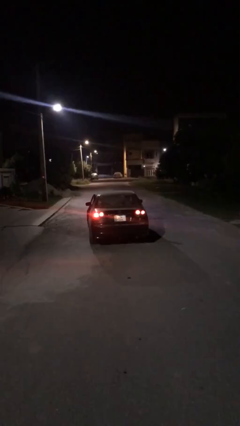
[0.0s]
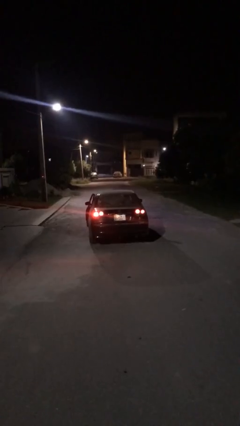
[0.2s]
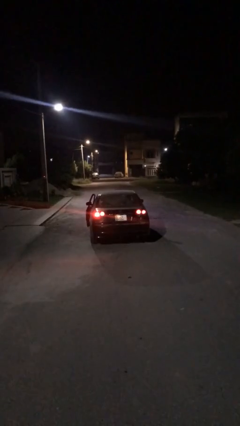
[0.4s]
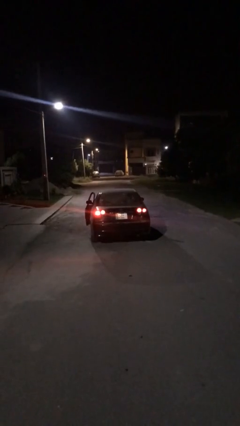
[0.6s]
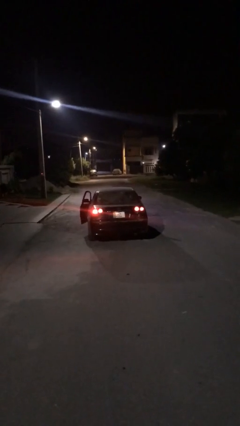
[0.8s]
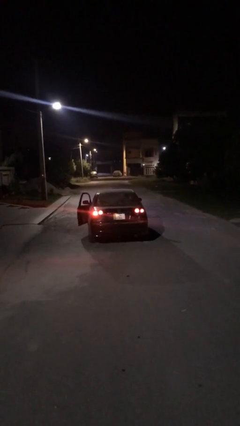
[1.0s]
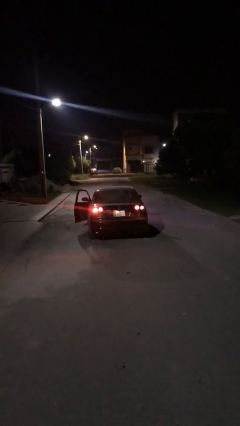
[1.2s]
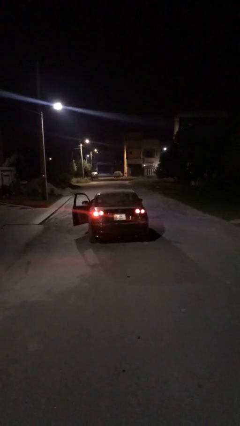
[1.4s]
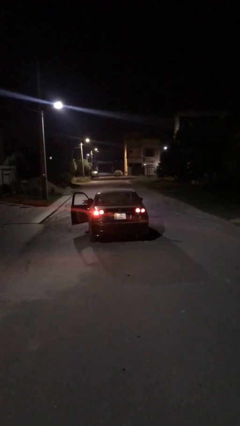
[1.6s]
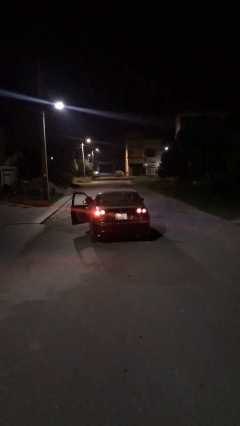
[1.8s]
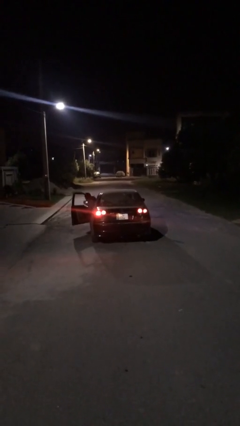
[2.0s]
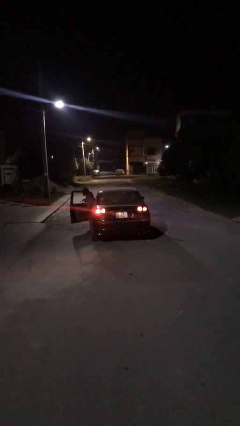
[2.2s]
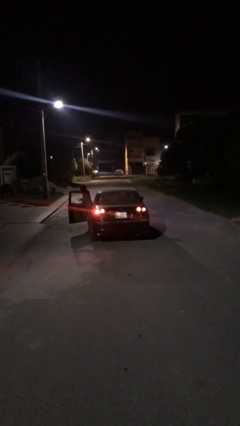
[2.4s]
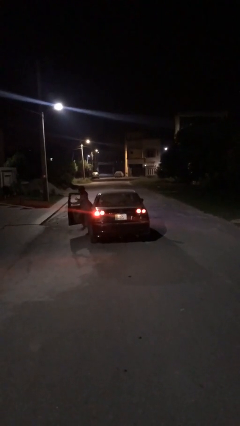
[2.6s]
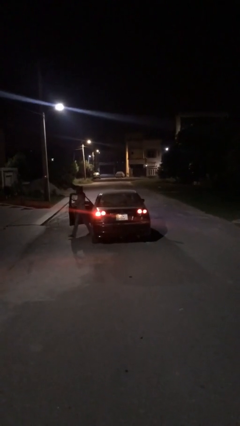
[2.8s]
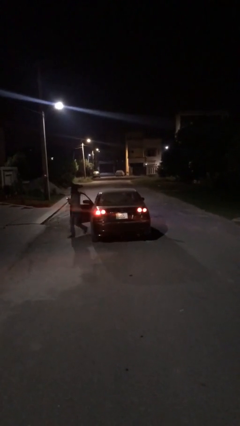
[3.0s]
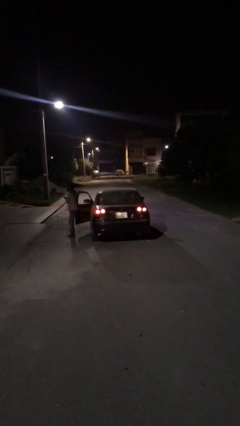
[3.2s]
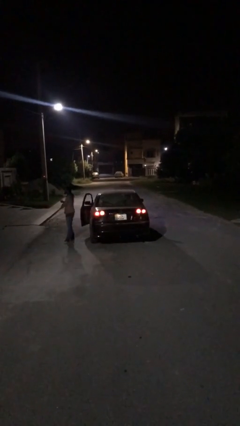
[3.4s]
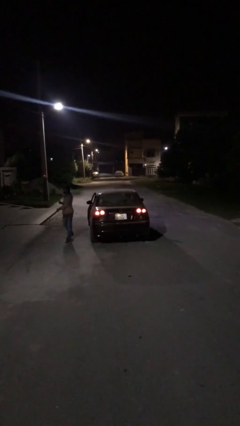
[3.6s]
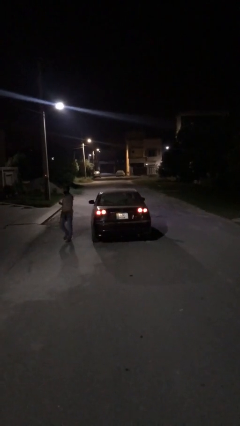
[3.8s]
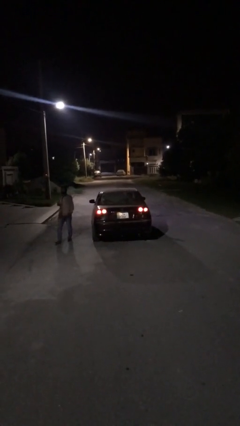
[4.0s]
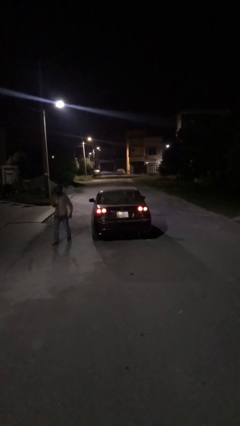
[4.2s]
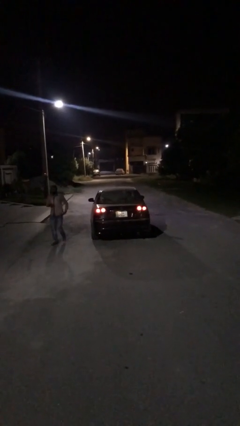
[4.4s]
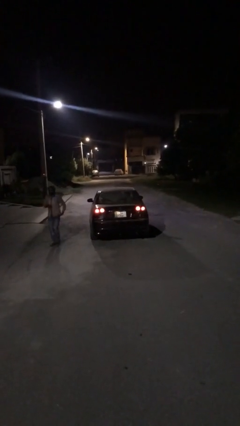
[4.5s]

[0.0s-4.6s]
car drops off person

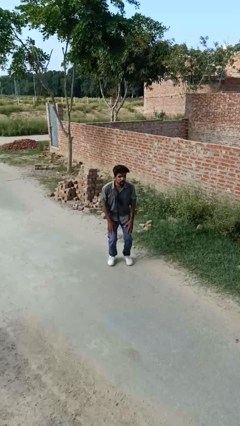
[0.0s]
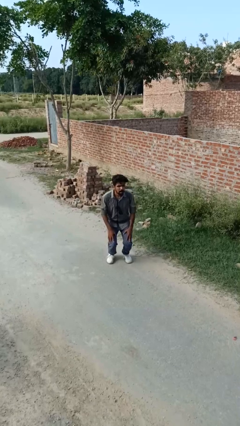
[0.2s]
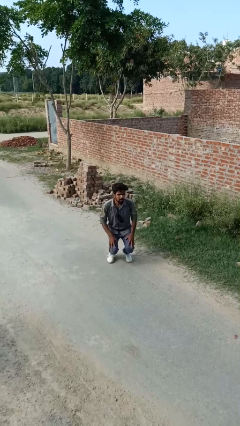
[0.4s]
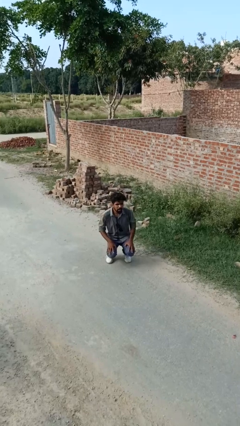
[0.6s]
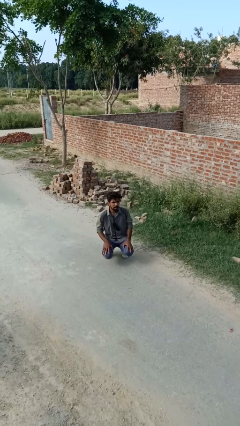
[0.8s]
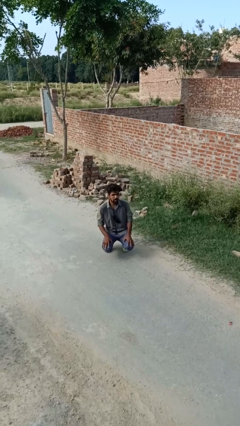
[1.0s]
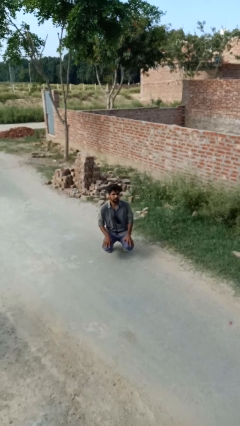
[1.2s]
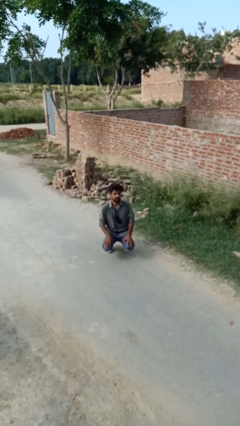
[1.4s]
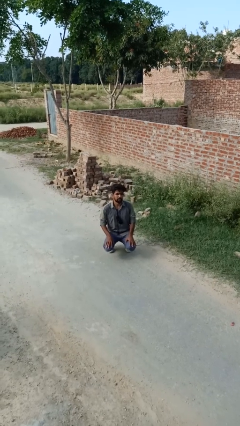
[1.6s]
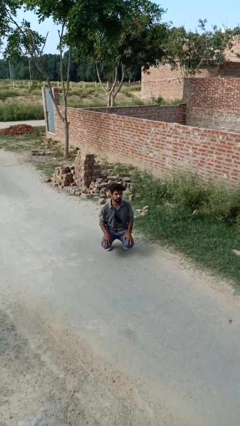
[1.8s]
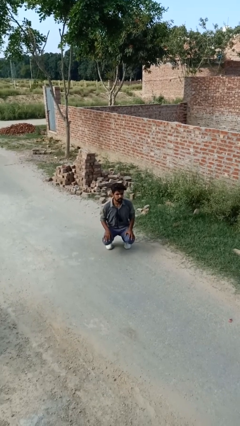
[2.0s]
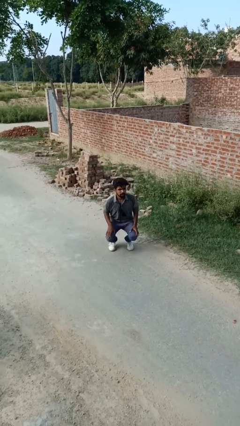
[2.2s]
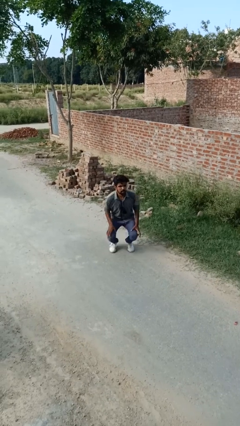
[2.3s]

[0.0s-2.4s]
person kneels

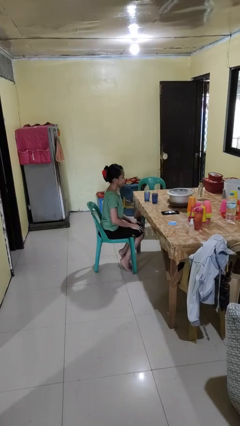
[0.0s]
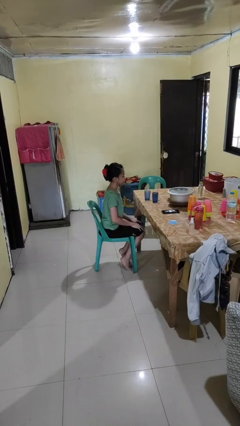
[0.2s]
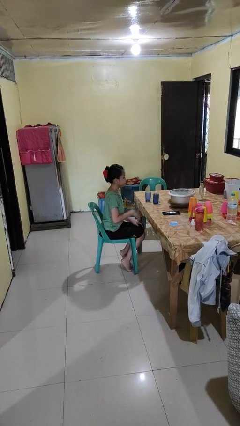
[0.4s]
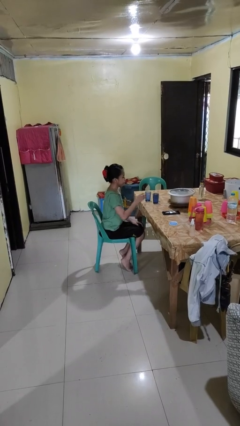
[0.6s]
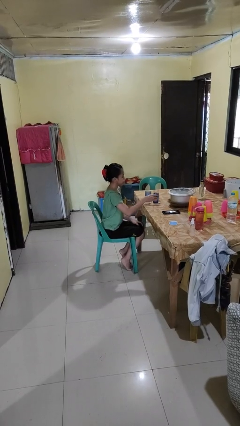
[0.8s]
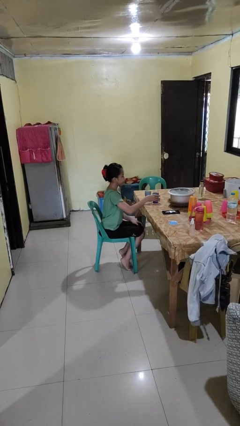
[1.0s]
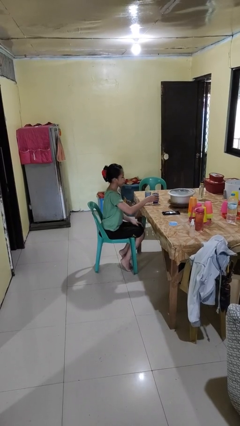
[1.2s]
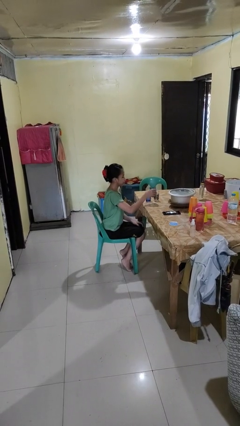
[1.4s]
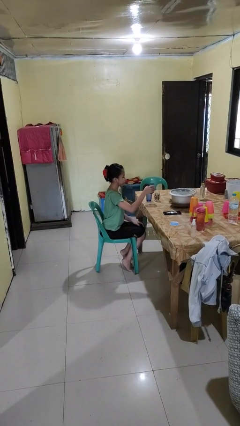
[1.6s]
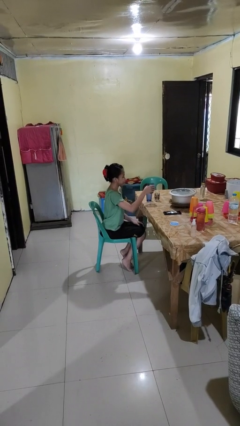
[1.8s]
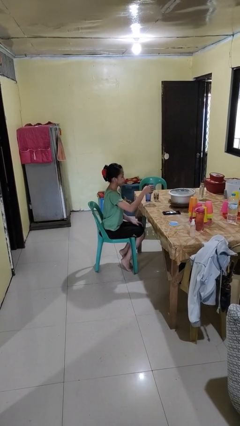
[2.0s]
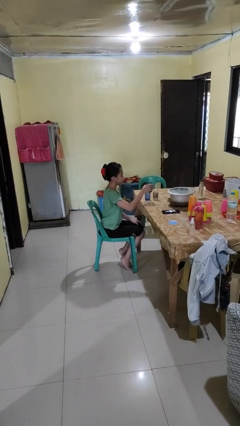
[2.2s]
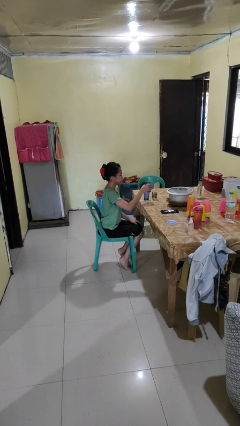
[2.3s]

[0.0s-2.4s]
person picks up object from table

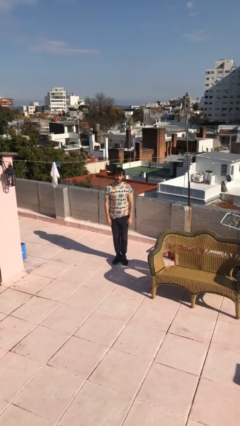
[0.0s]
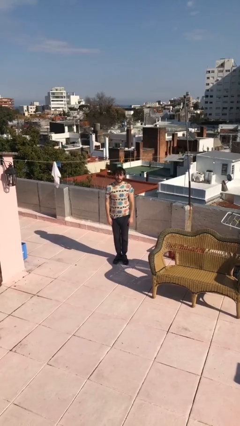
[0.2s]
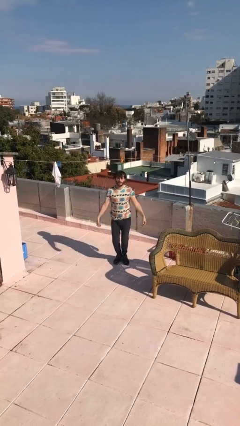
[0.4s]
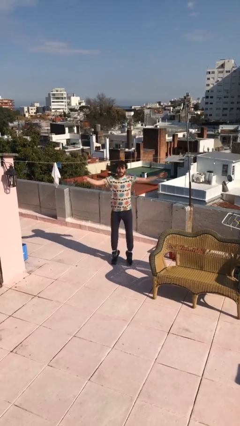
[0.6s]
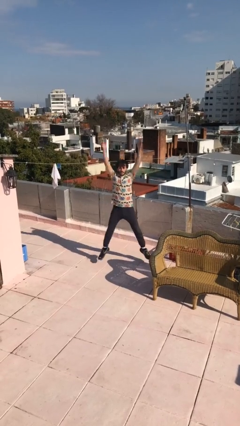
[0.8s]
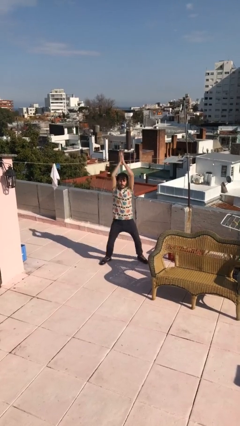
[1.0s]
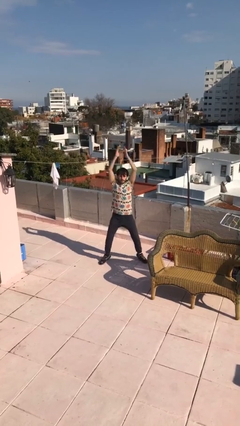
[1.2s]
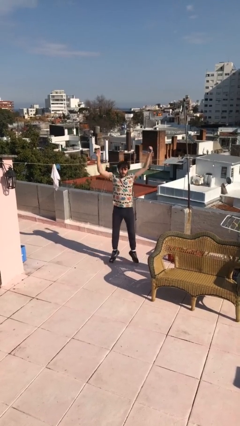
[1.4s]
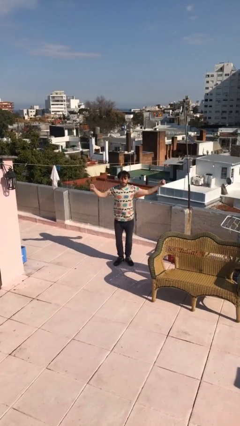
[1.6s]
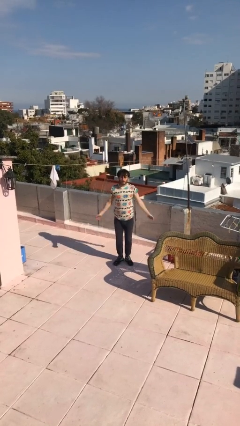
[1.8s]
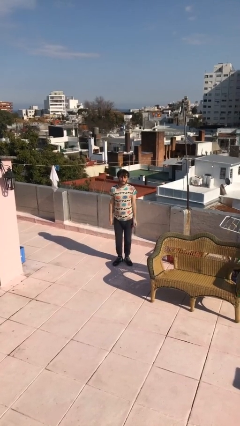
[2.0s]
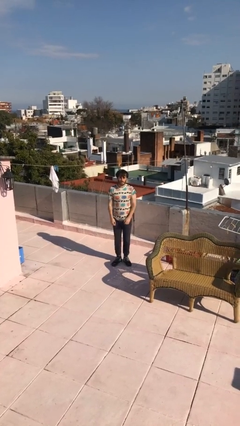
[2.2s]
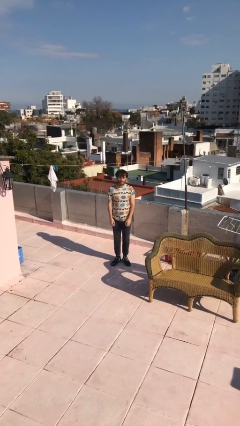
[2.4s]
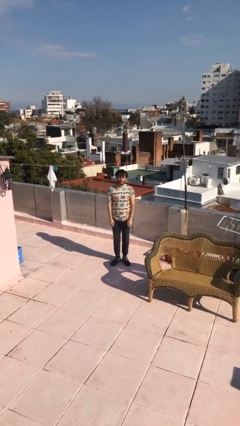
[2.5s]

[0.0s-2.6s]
person exercises with jumping jacks

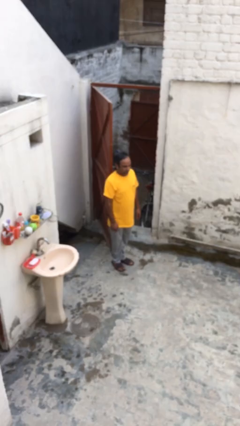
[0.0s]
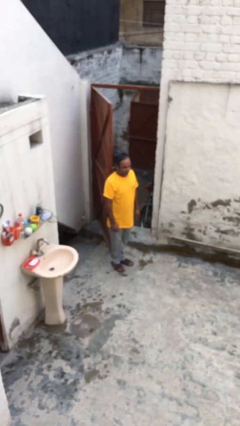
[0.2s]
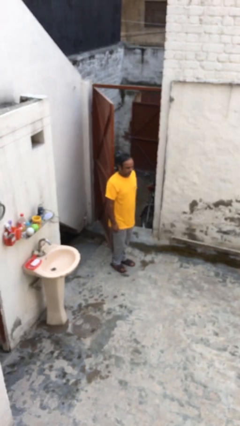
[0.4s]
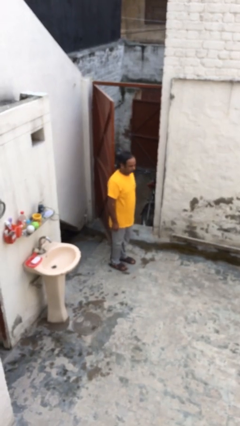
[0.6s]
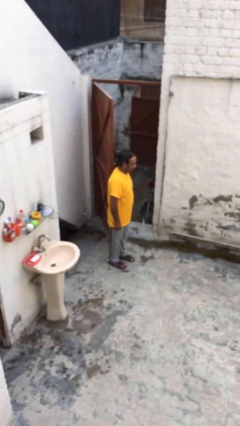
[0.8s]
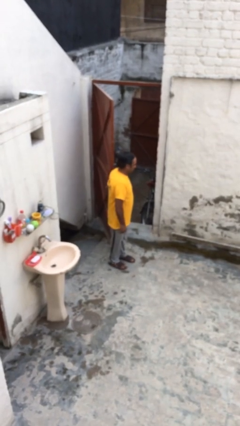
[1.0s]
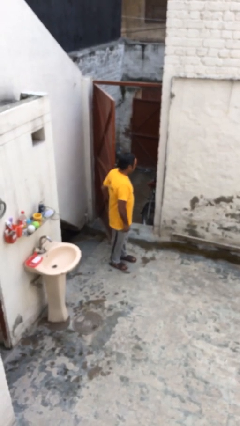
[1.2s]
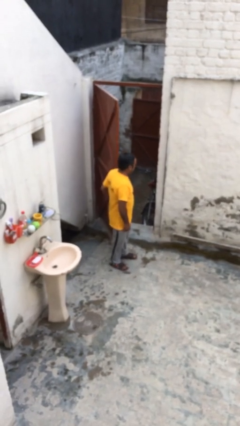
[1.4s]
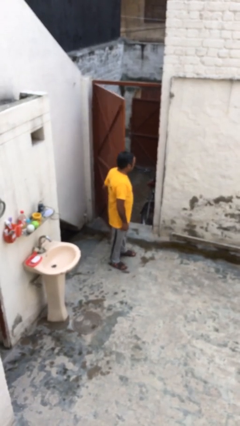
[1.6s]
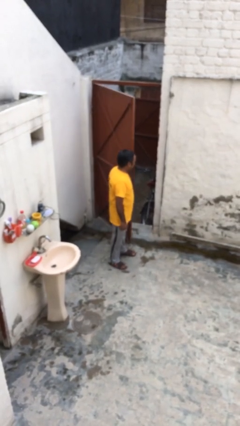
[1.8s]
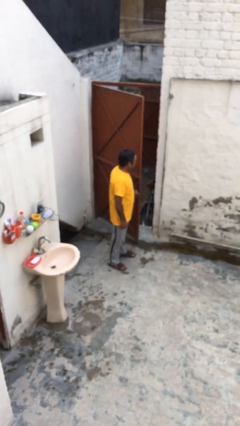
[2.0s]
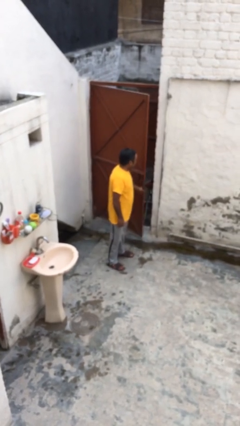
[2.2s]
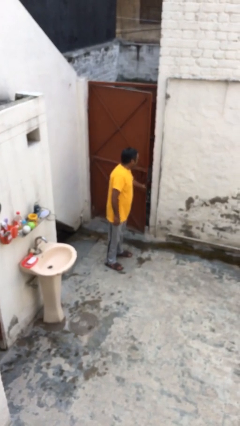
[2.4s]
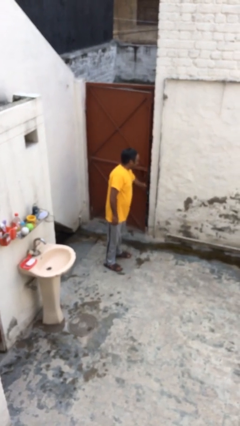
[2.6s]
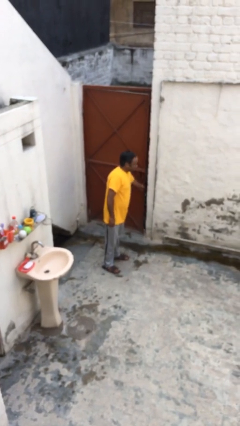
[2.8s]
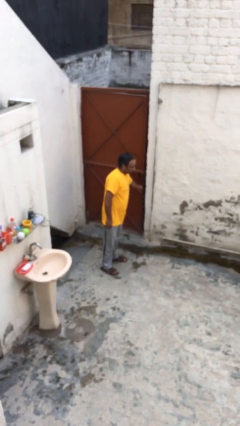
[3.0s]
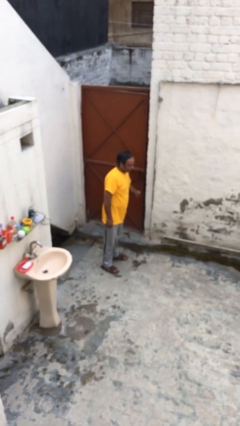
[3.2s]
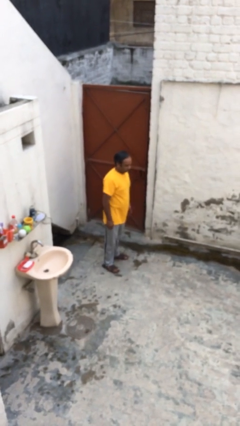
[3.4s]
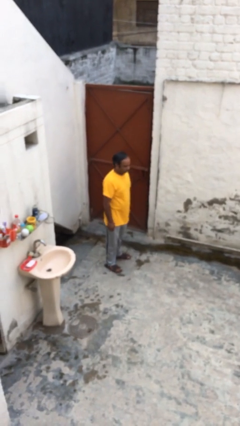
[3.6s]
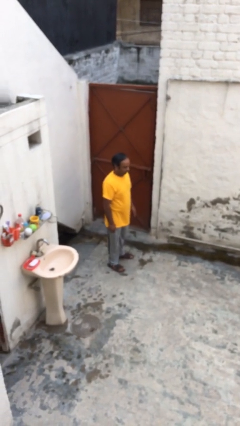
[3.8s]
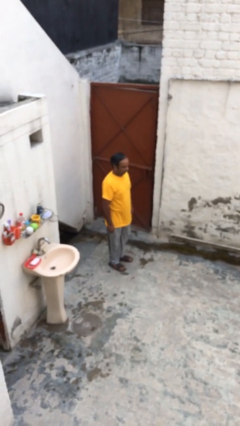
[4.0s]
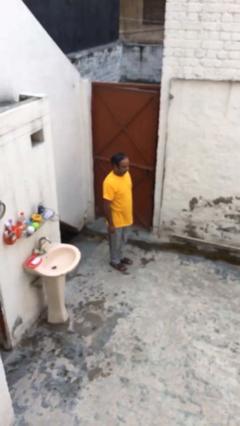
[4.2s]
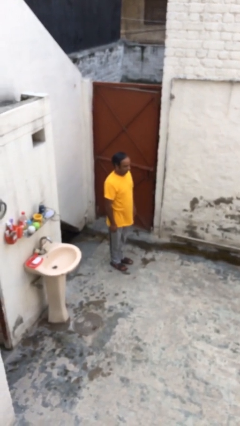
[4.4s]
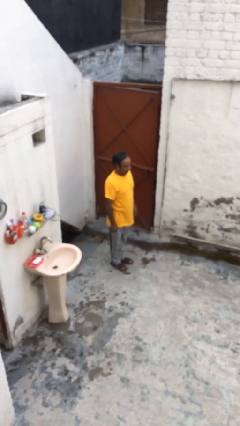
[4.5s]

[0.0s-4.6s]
person closes facility door

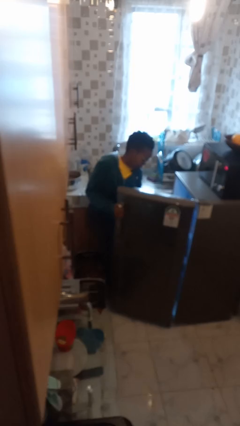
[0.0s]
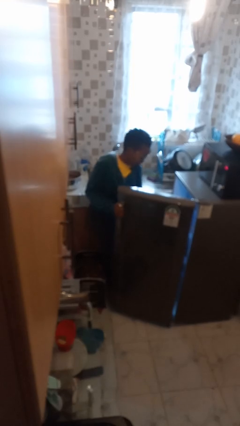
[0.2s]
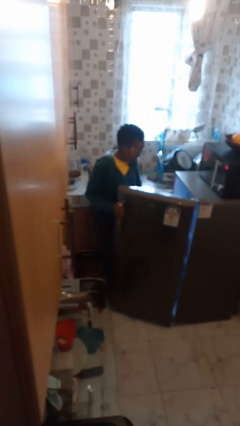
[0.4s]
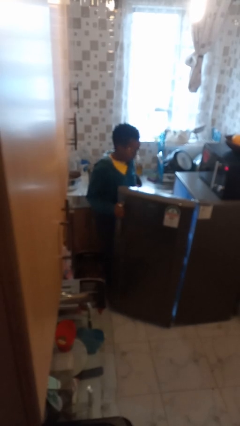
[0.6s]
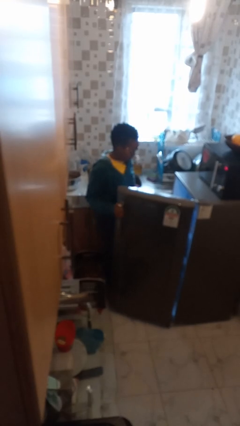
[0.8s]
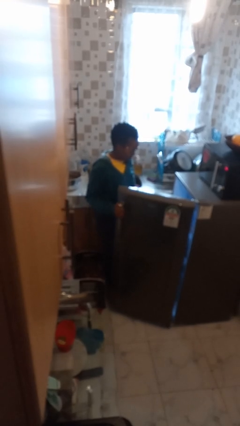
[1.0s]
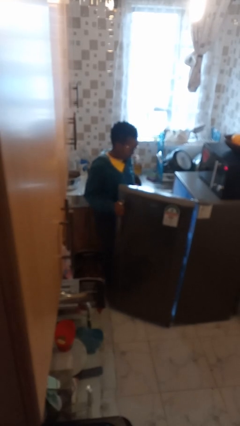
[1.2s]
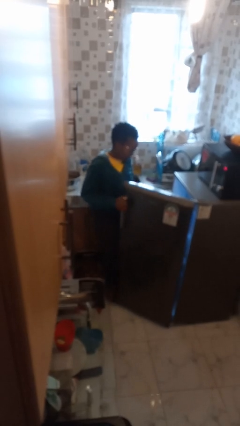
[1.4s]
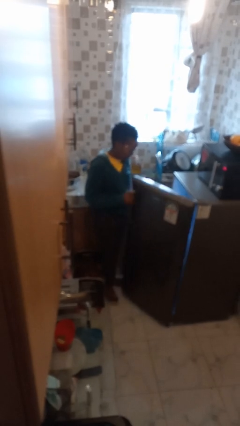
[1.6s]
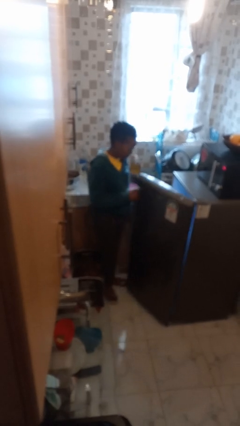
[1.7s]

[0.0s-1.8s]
person puts object into refrigerator
